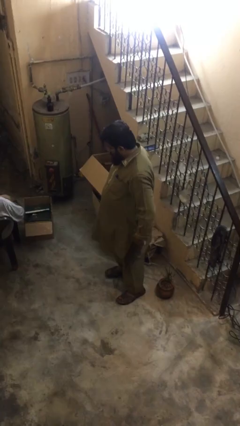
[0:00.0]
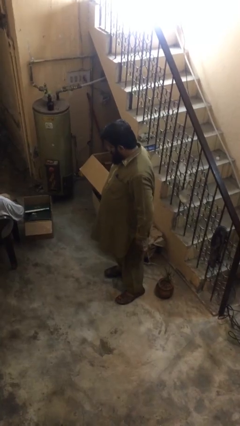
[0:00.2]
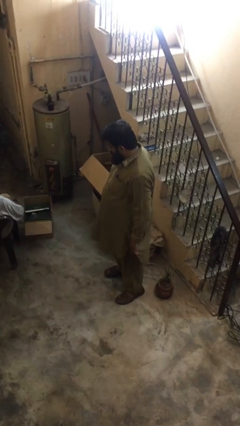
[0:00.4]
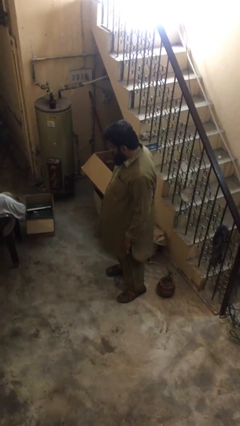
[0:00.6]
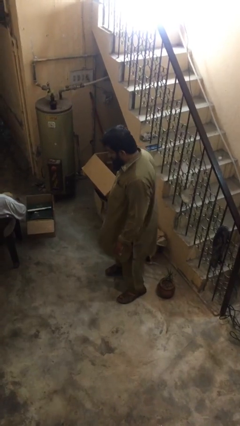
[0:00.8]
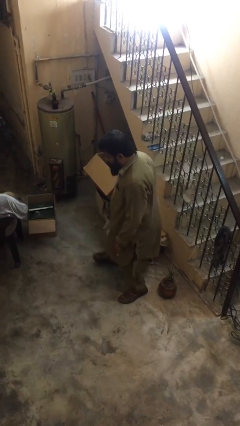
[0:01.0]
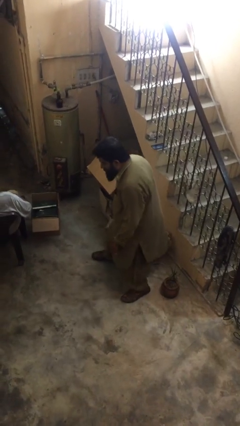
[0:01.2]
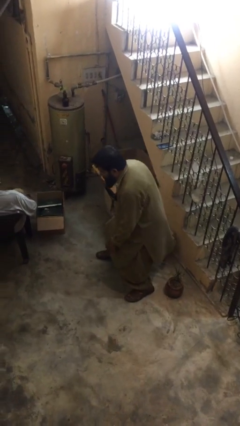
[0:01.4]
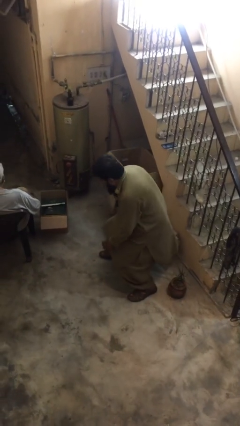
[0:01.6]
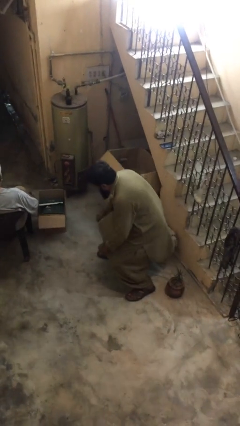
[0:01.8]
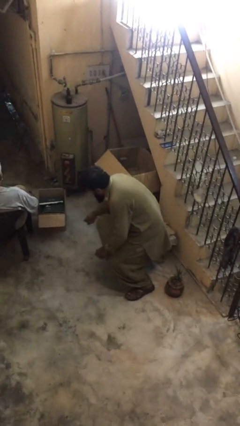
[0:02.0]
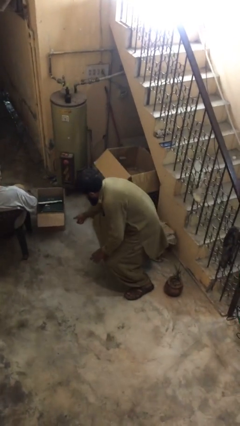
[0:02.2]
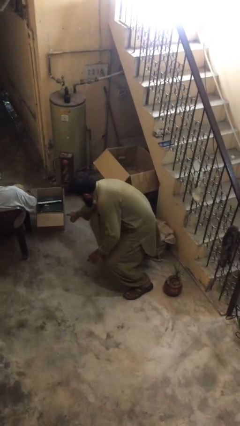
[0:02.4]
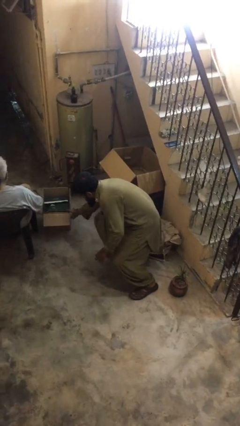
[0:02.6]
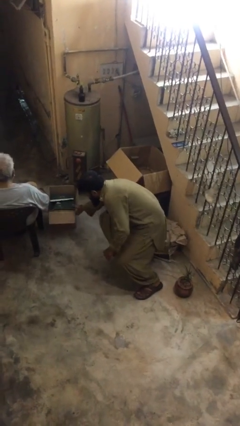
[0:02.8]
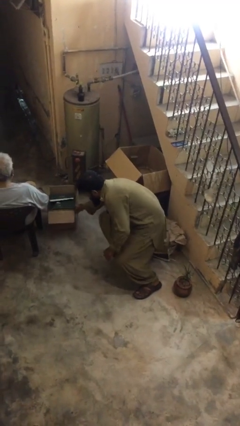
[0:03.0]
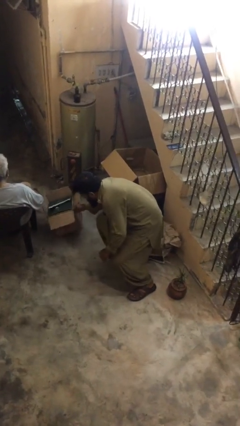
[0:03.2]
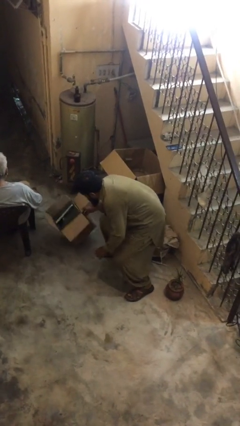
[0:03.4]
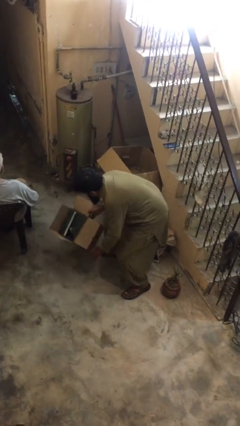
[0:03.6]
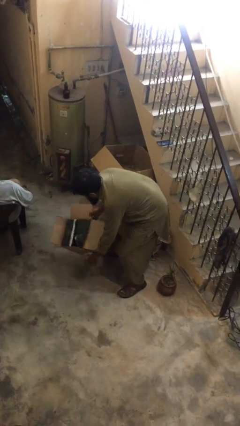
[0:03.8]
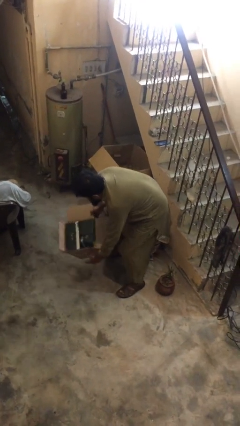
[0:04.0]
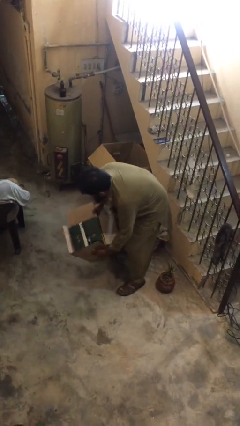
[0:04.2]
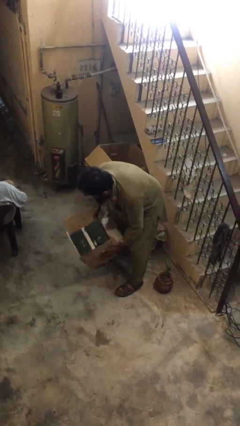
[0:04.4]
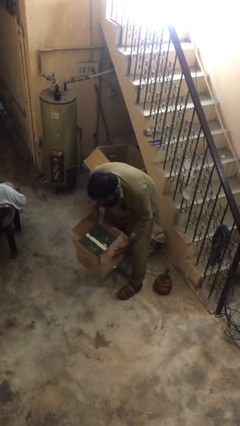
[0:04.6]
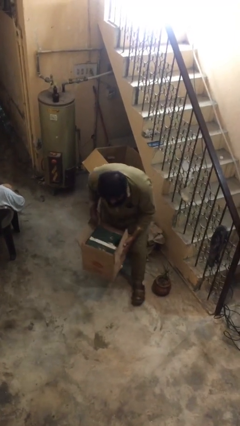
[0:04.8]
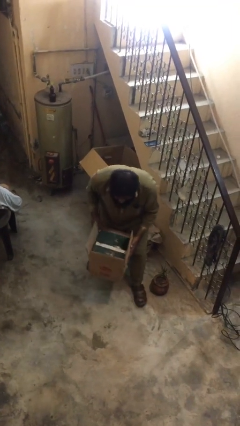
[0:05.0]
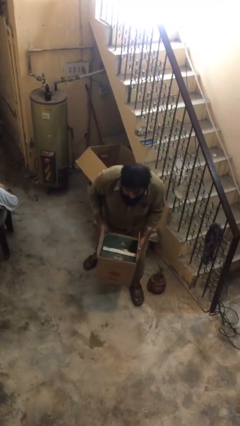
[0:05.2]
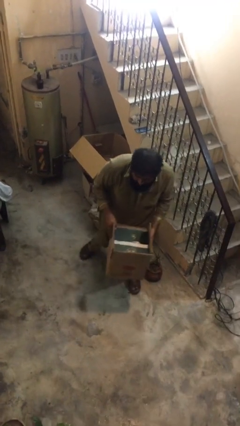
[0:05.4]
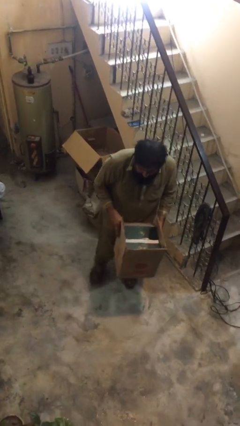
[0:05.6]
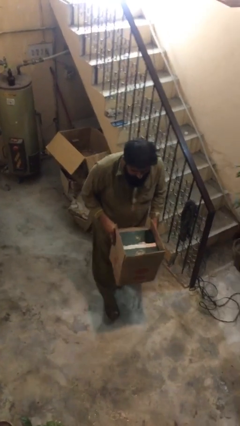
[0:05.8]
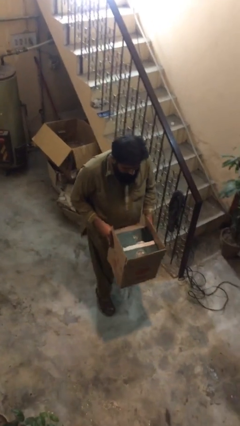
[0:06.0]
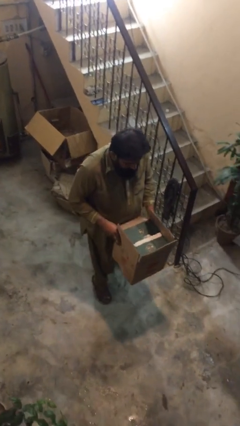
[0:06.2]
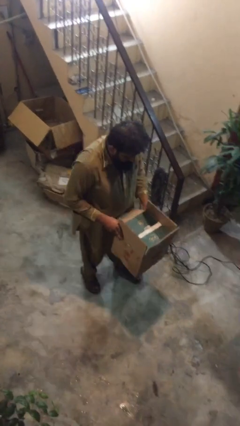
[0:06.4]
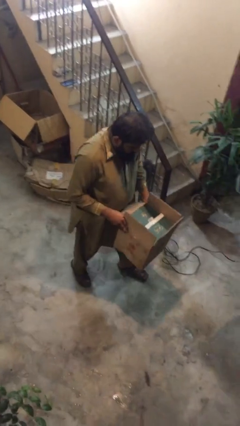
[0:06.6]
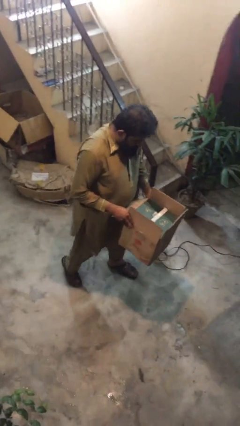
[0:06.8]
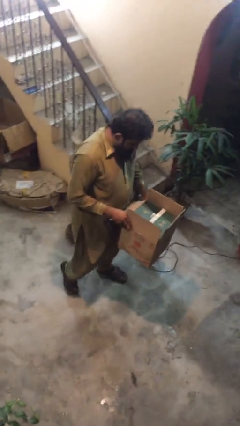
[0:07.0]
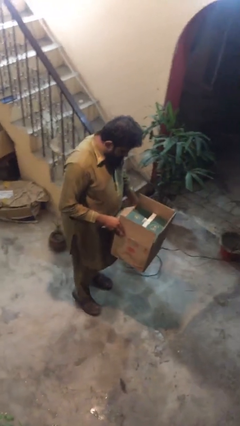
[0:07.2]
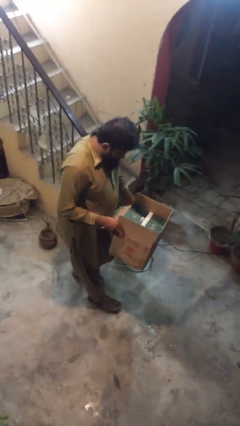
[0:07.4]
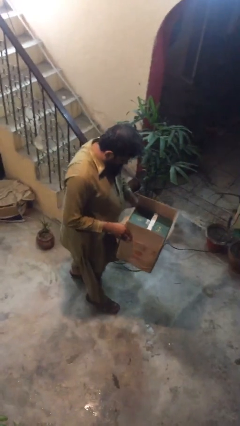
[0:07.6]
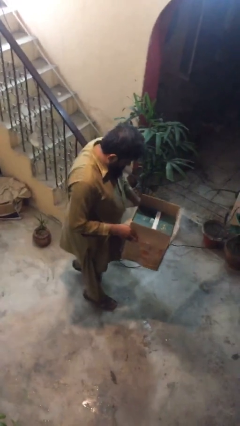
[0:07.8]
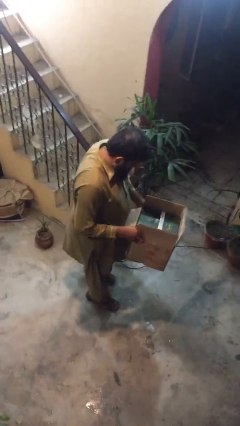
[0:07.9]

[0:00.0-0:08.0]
person steals object from person

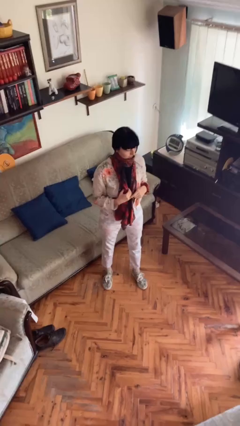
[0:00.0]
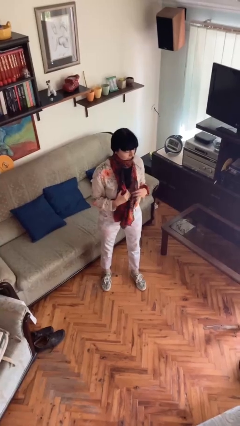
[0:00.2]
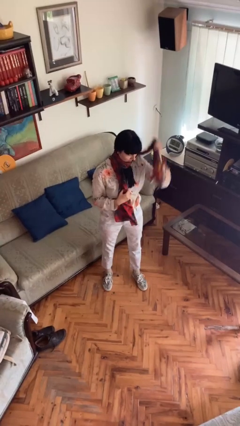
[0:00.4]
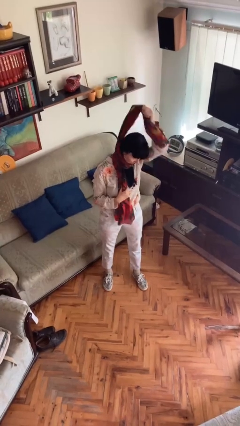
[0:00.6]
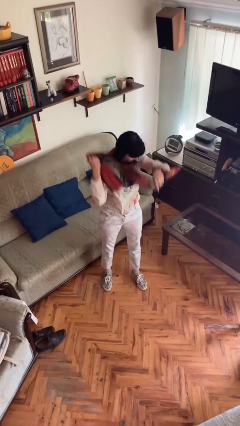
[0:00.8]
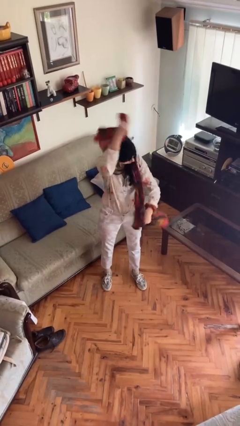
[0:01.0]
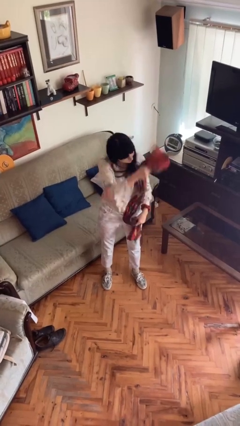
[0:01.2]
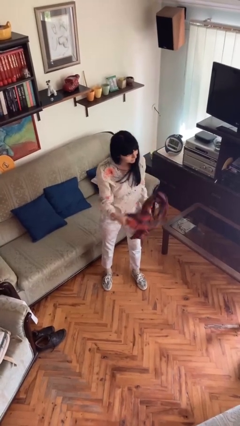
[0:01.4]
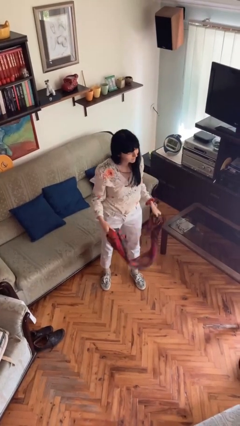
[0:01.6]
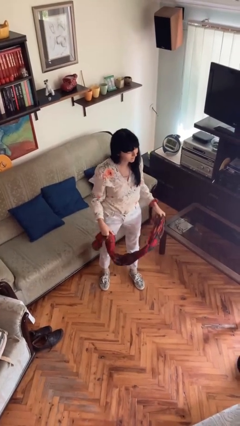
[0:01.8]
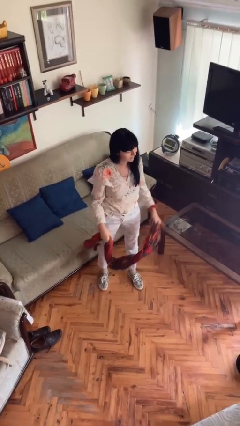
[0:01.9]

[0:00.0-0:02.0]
person takes off scarf

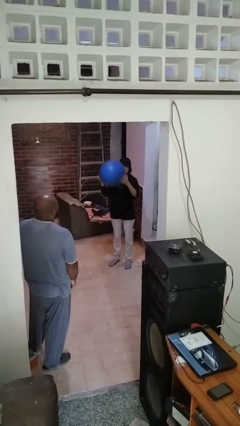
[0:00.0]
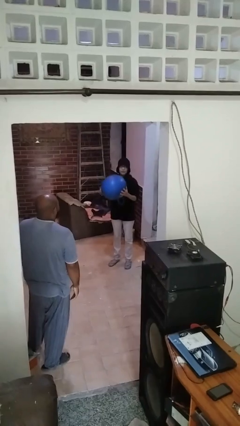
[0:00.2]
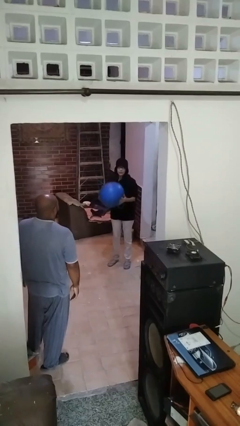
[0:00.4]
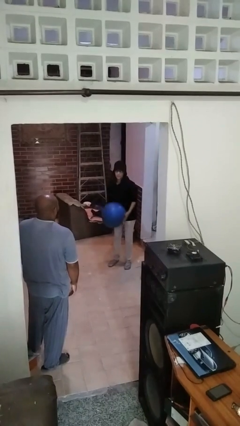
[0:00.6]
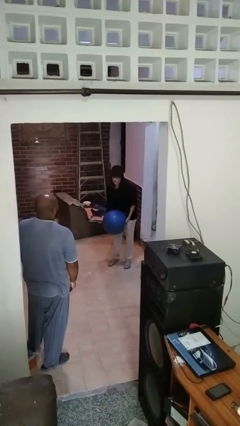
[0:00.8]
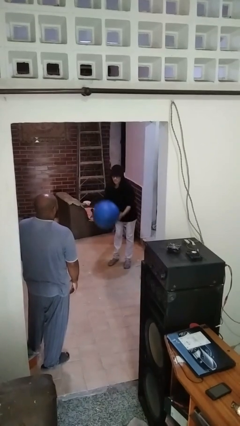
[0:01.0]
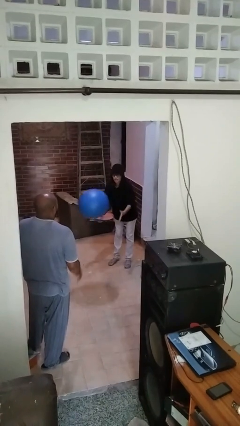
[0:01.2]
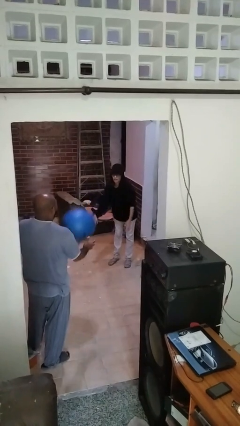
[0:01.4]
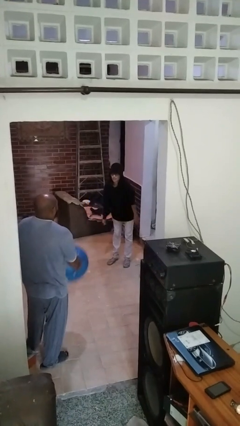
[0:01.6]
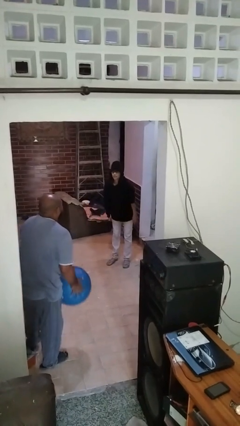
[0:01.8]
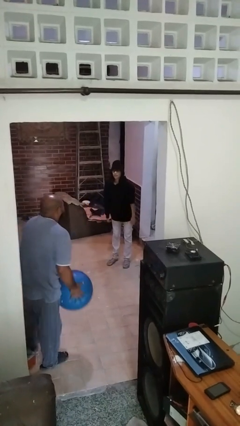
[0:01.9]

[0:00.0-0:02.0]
person throws object to person

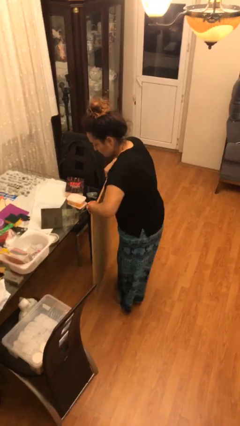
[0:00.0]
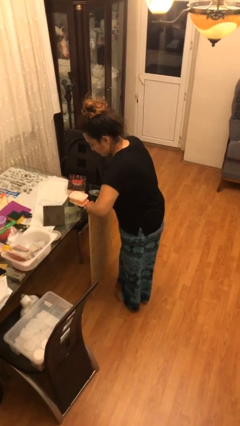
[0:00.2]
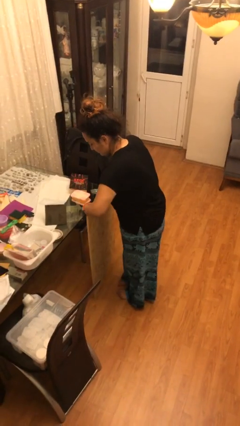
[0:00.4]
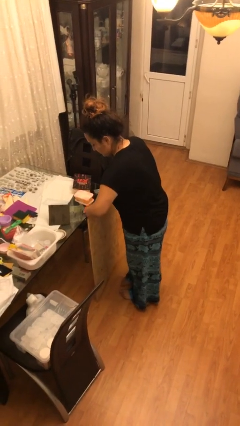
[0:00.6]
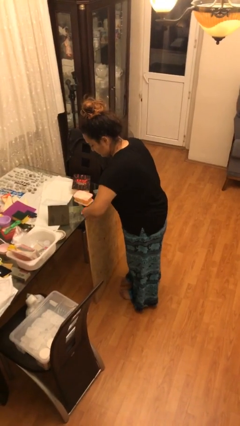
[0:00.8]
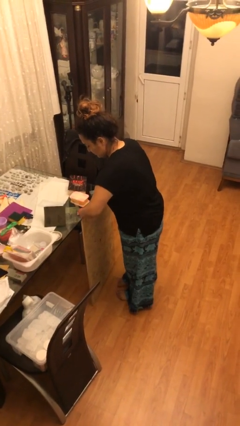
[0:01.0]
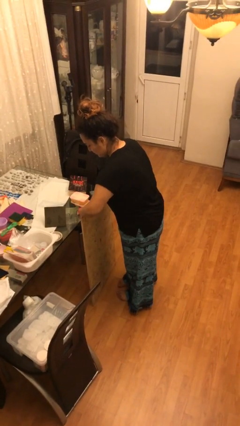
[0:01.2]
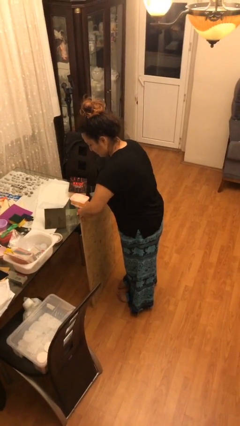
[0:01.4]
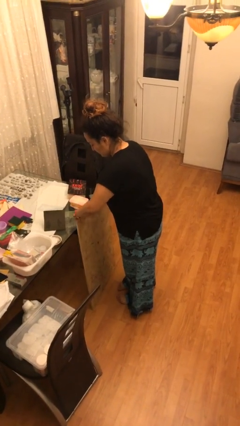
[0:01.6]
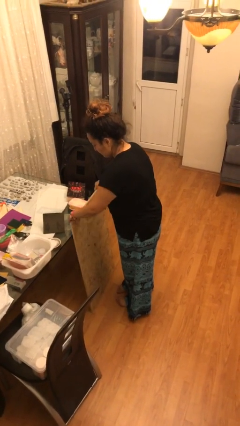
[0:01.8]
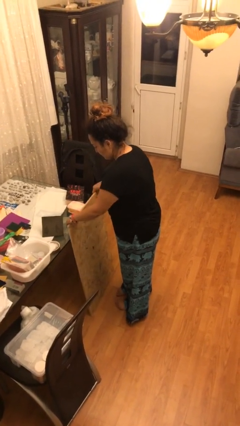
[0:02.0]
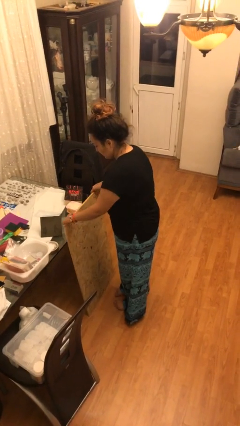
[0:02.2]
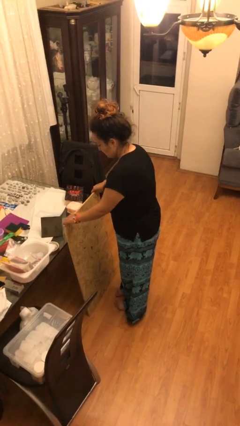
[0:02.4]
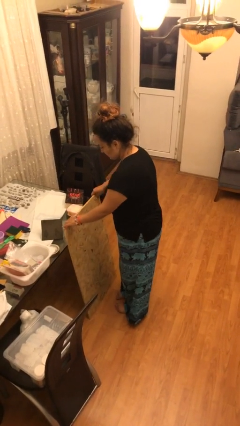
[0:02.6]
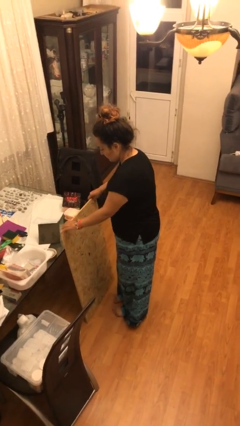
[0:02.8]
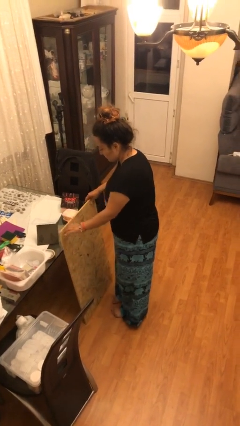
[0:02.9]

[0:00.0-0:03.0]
person puts down object on floor

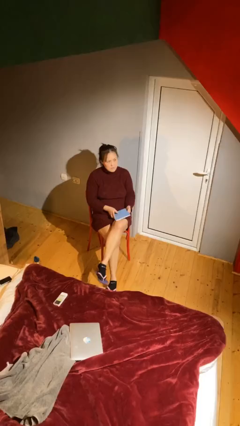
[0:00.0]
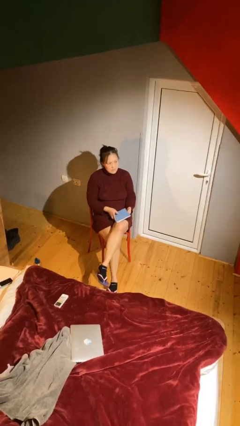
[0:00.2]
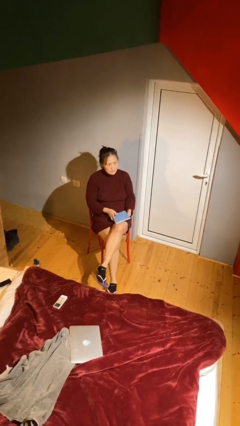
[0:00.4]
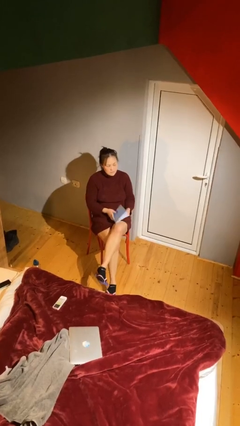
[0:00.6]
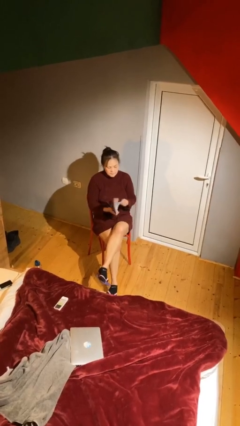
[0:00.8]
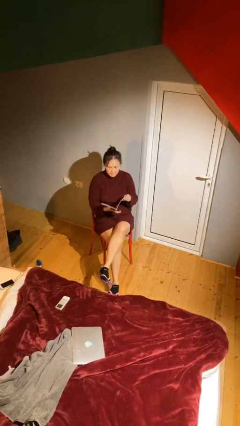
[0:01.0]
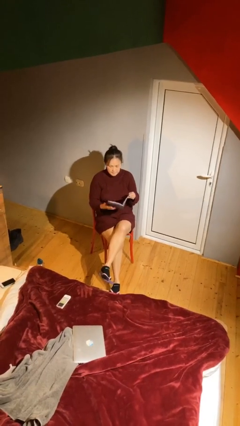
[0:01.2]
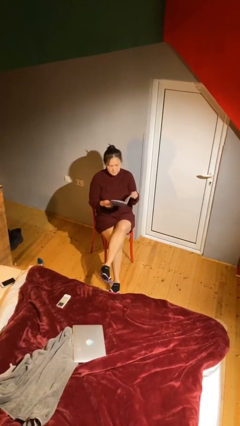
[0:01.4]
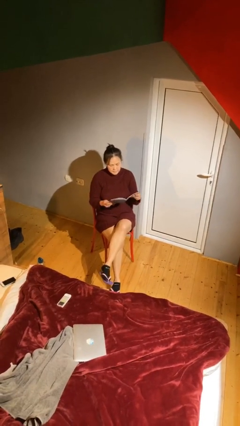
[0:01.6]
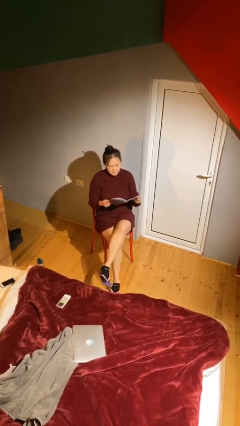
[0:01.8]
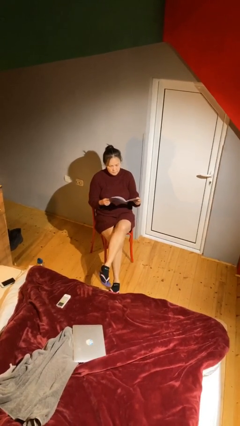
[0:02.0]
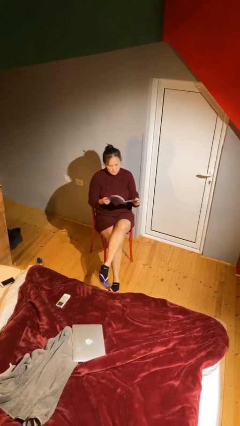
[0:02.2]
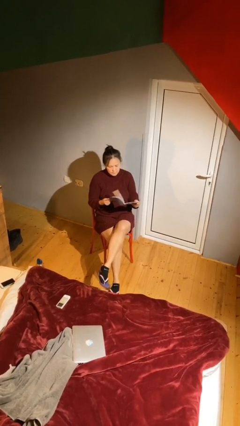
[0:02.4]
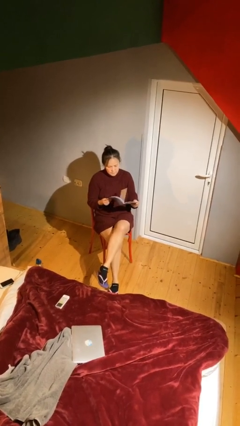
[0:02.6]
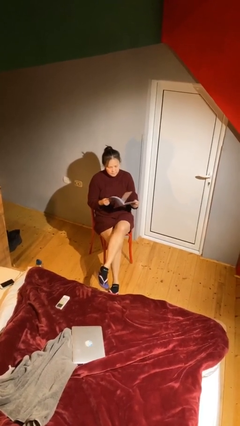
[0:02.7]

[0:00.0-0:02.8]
person reads document

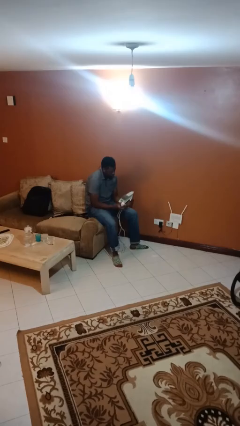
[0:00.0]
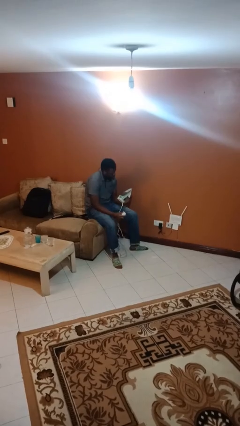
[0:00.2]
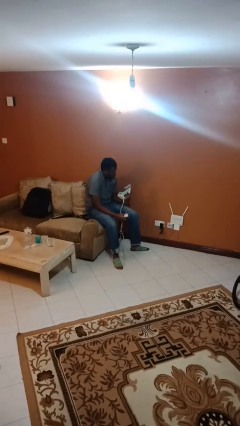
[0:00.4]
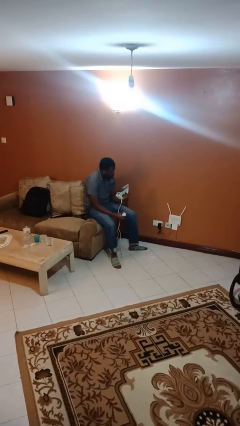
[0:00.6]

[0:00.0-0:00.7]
person unplugs from electrical socket
